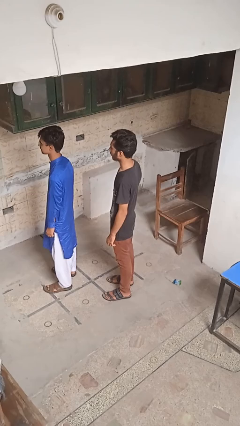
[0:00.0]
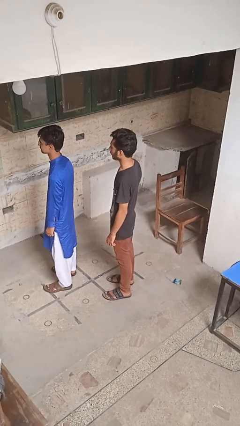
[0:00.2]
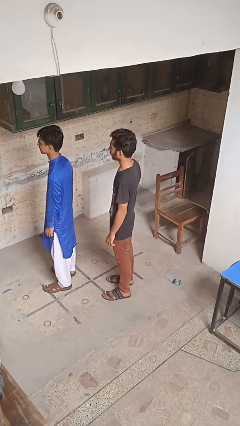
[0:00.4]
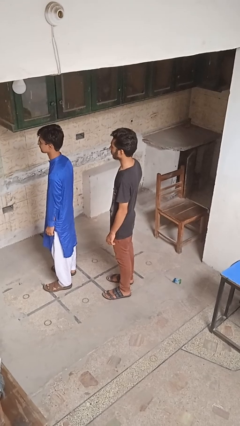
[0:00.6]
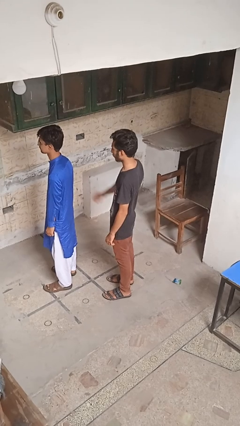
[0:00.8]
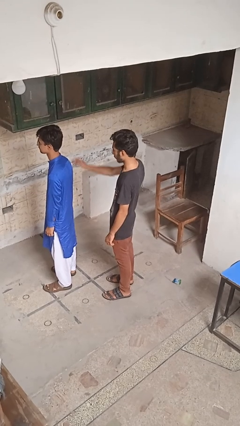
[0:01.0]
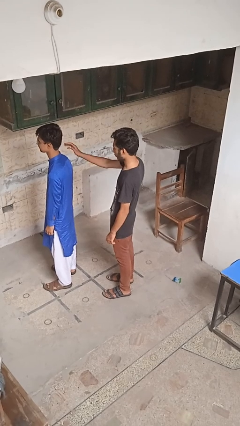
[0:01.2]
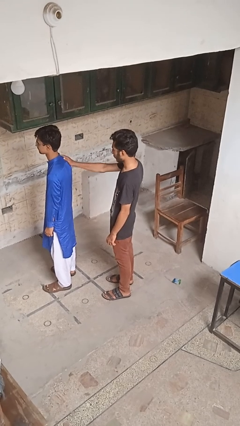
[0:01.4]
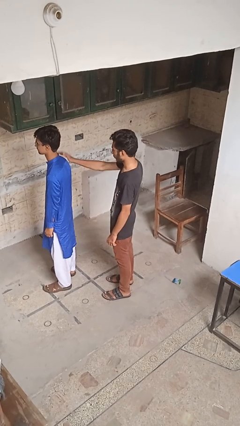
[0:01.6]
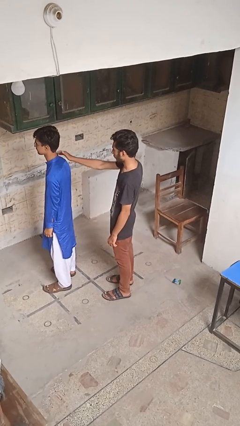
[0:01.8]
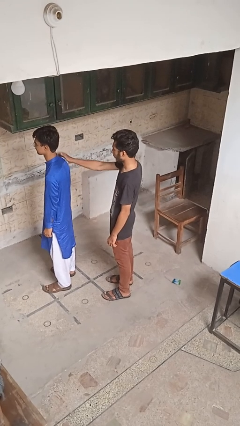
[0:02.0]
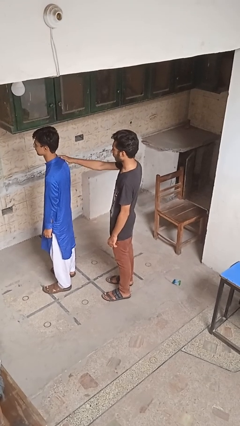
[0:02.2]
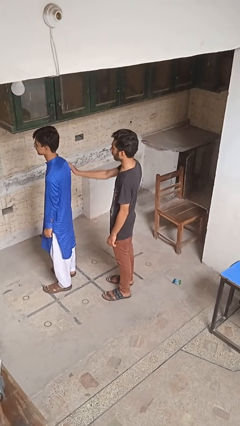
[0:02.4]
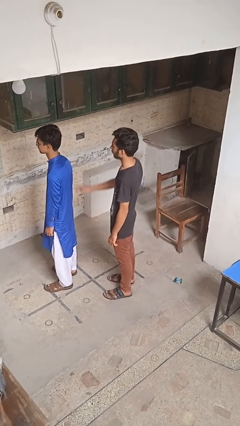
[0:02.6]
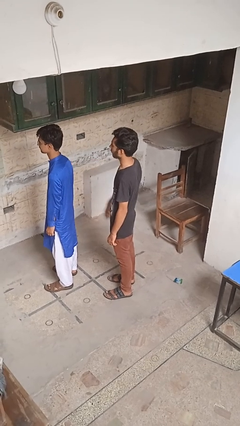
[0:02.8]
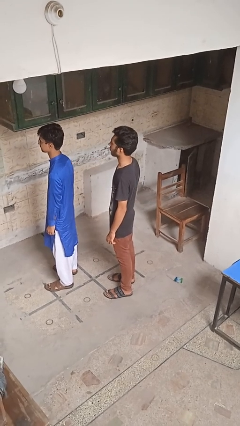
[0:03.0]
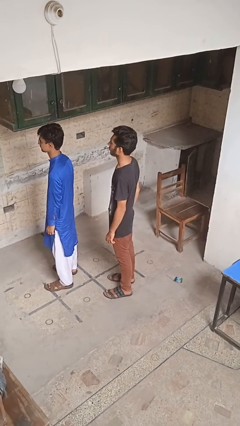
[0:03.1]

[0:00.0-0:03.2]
person touches back of person

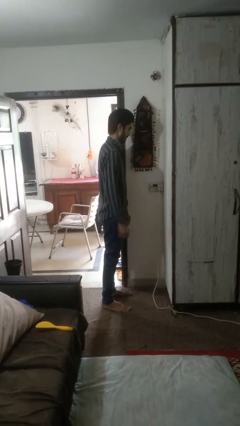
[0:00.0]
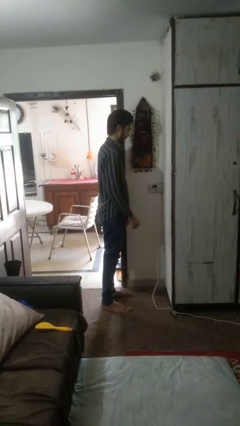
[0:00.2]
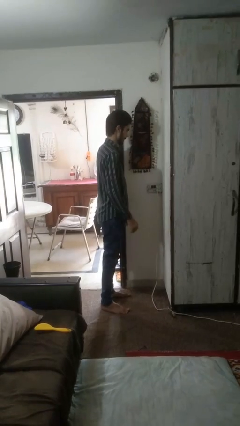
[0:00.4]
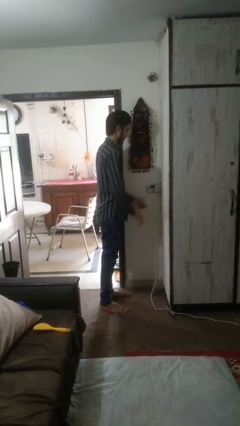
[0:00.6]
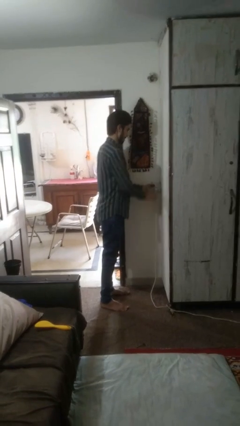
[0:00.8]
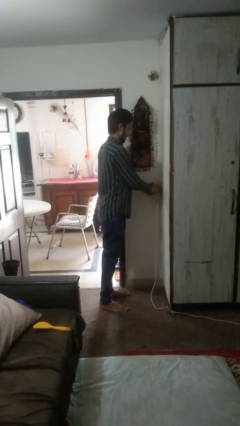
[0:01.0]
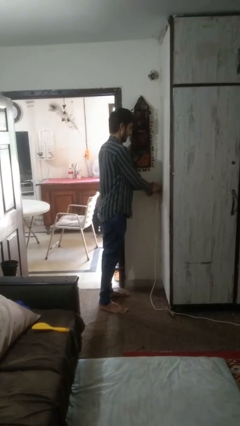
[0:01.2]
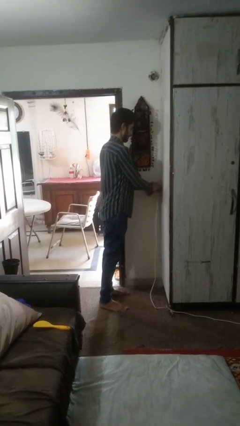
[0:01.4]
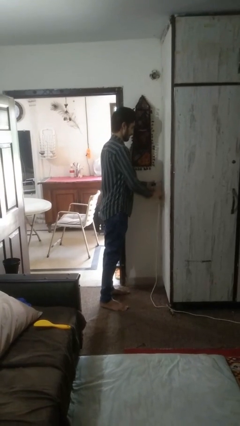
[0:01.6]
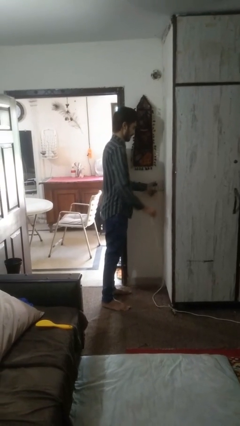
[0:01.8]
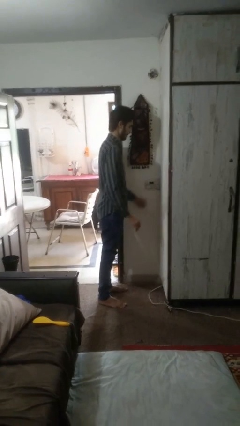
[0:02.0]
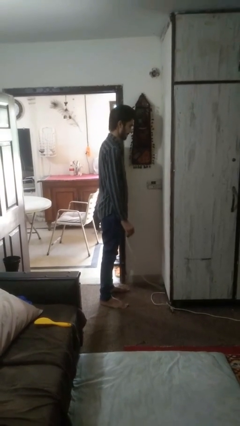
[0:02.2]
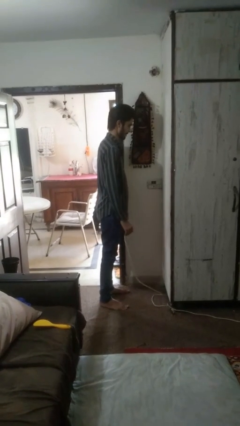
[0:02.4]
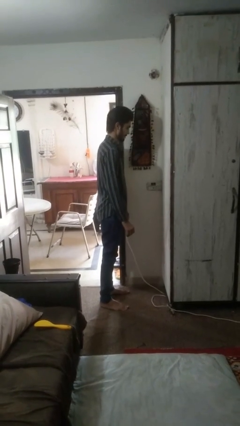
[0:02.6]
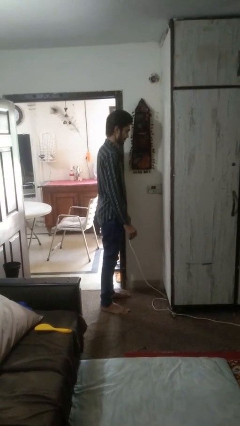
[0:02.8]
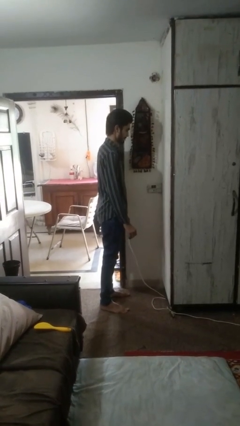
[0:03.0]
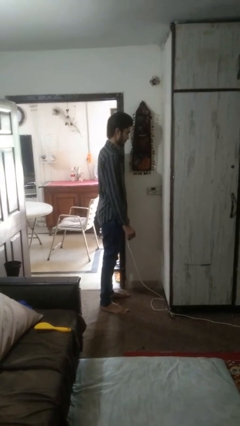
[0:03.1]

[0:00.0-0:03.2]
person unplugs from electrical socket

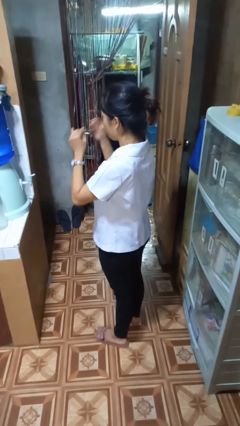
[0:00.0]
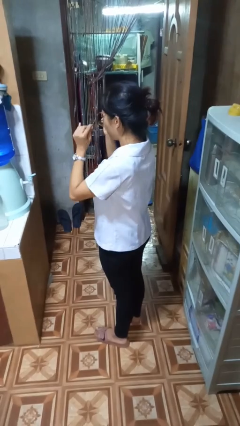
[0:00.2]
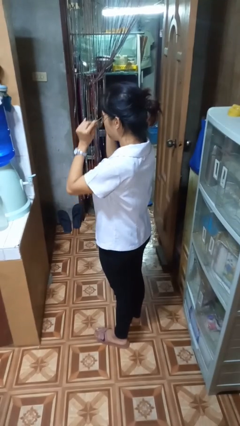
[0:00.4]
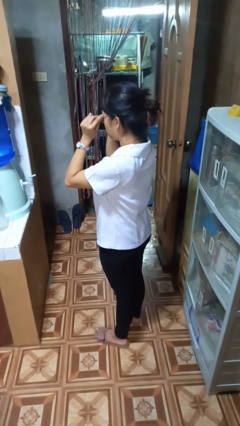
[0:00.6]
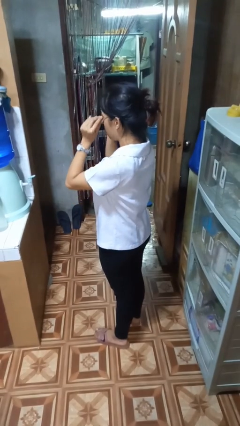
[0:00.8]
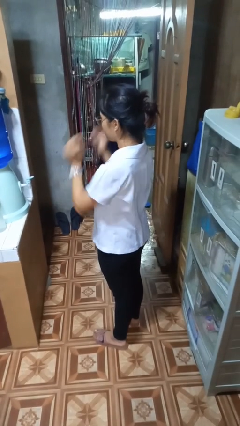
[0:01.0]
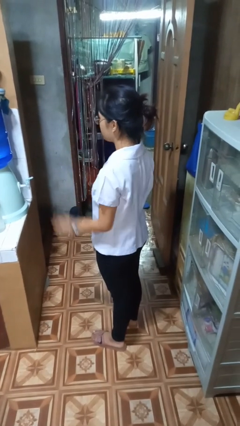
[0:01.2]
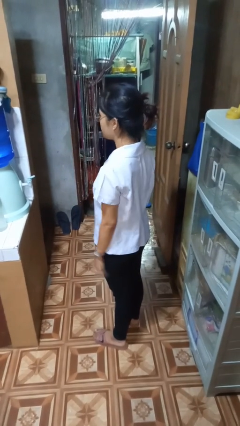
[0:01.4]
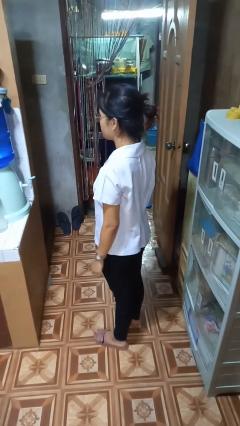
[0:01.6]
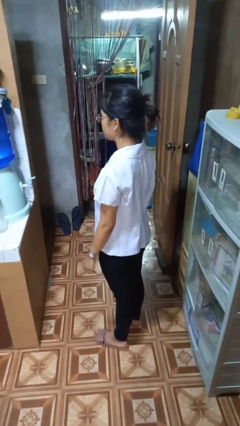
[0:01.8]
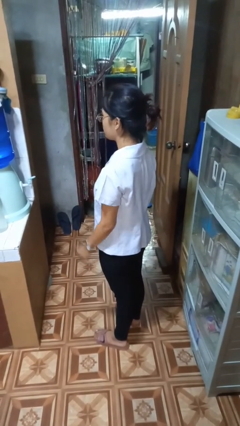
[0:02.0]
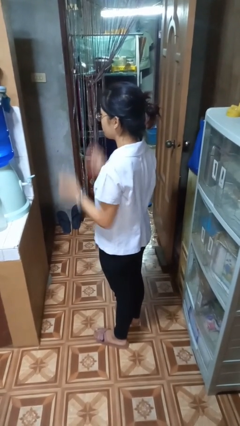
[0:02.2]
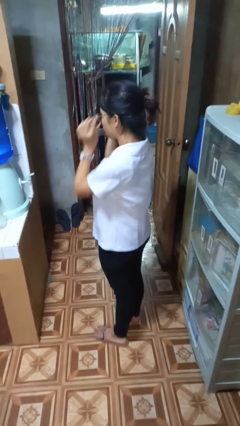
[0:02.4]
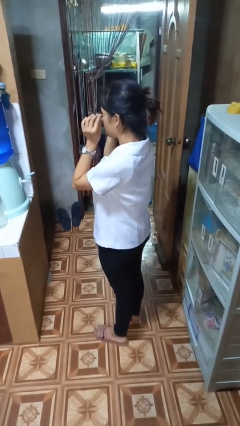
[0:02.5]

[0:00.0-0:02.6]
person puts on glasses

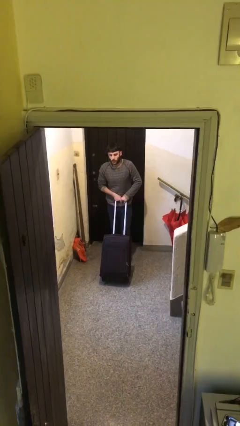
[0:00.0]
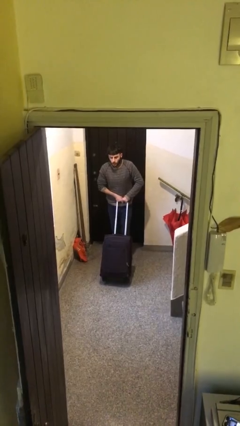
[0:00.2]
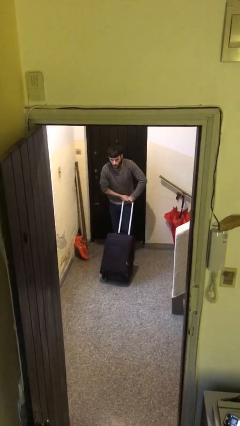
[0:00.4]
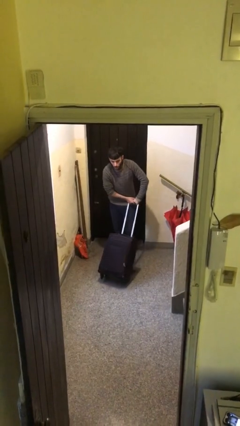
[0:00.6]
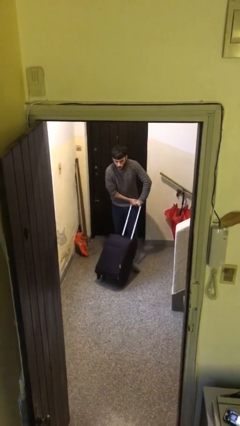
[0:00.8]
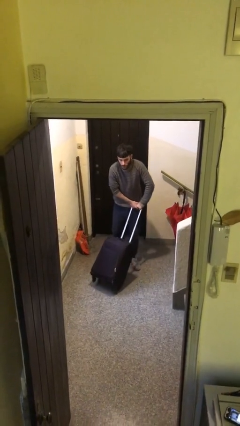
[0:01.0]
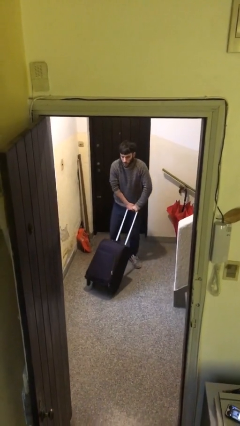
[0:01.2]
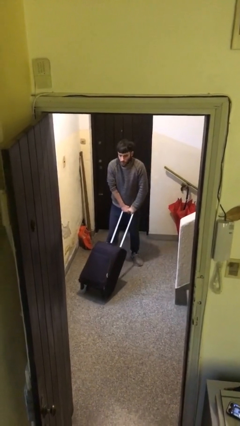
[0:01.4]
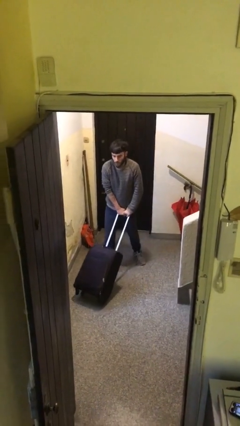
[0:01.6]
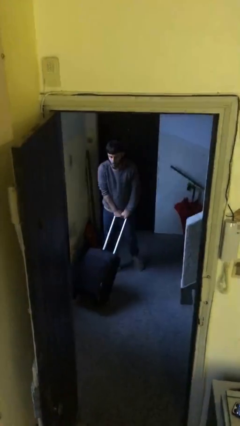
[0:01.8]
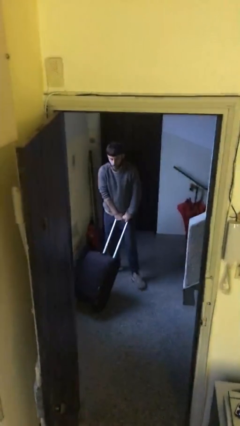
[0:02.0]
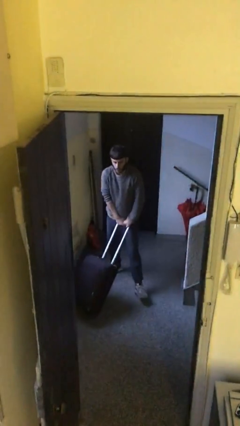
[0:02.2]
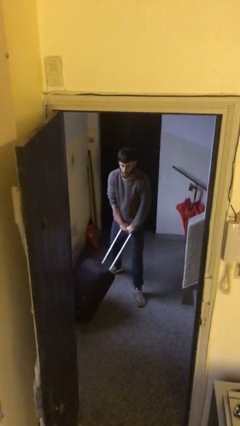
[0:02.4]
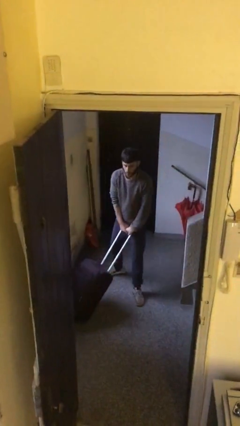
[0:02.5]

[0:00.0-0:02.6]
person pushes wheeled cart

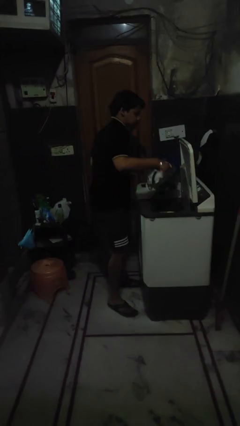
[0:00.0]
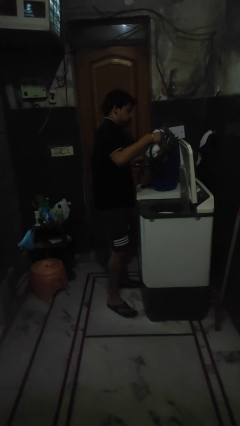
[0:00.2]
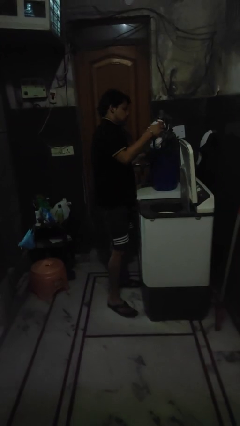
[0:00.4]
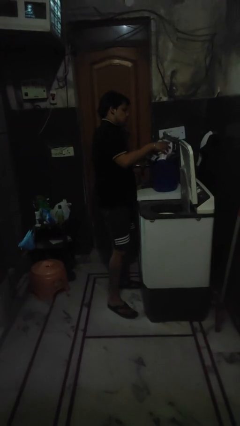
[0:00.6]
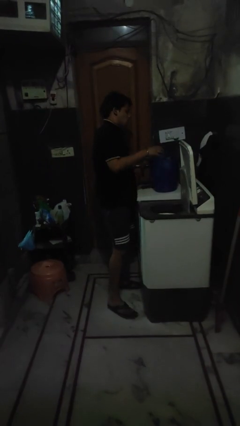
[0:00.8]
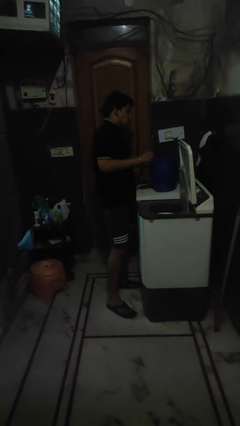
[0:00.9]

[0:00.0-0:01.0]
person unloads clotheswasher

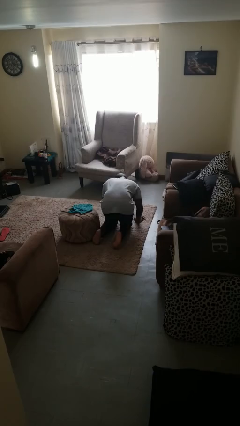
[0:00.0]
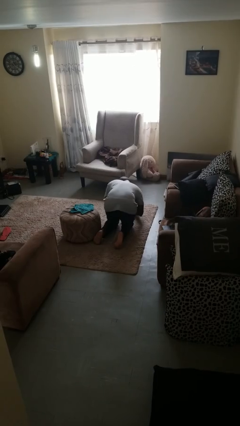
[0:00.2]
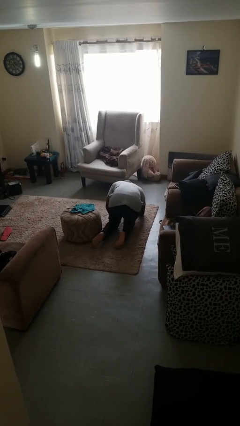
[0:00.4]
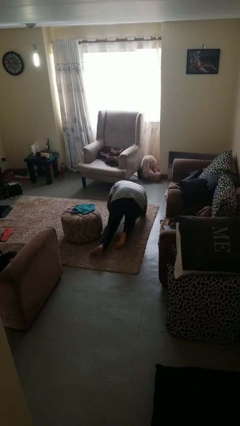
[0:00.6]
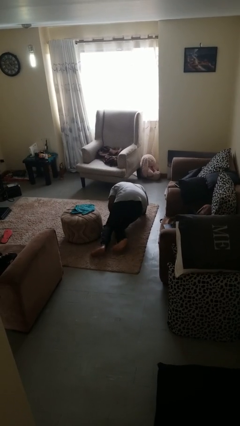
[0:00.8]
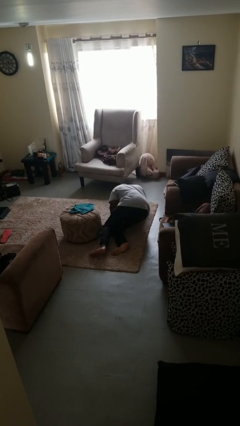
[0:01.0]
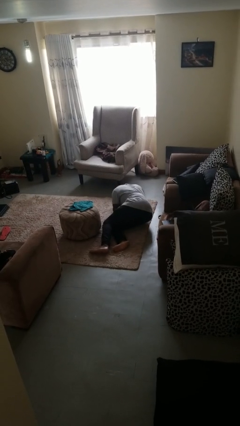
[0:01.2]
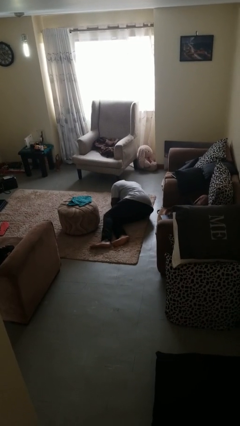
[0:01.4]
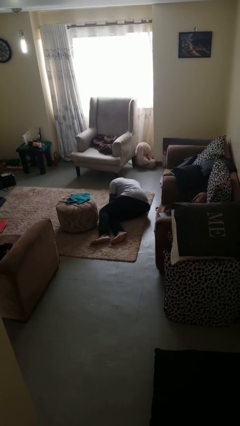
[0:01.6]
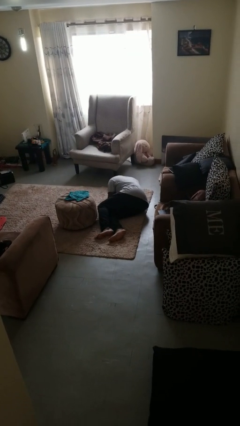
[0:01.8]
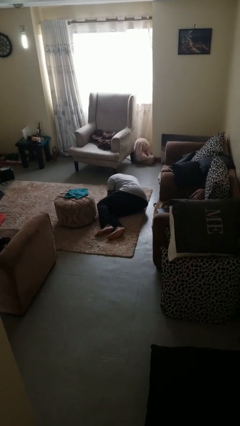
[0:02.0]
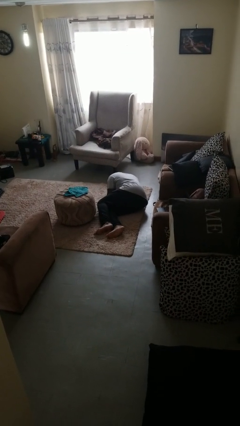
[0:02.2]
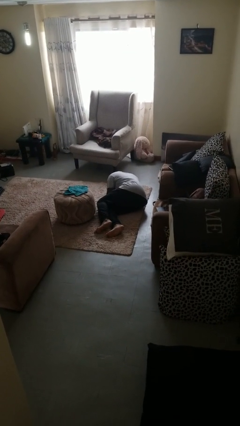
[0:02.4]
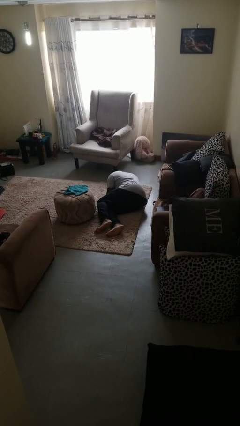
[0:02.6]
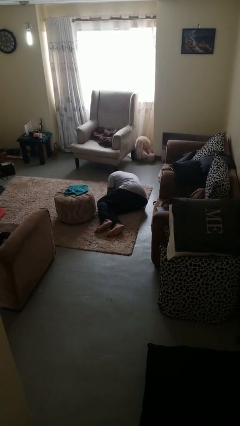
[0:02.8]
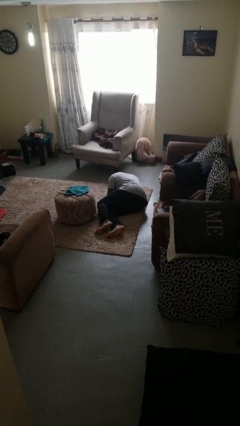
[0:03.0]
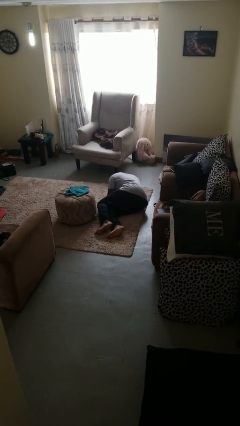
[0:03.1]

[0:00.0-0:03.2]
person lies down on floor

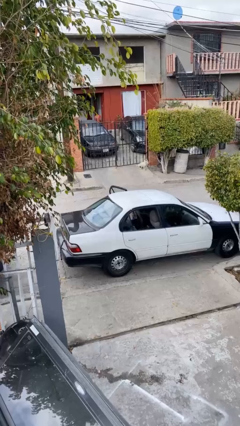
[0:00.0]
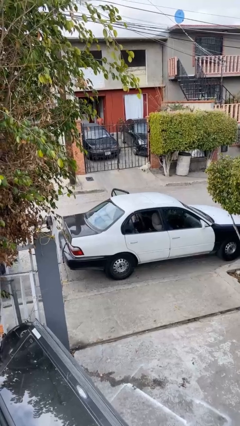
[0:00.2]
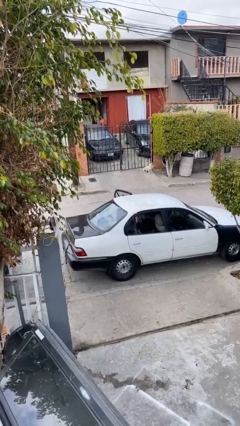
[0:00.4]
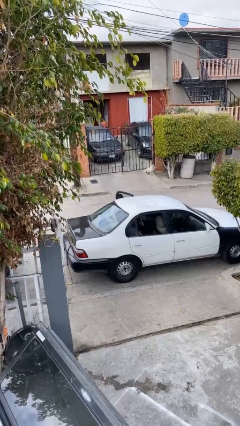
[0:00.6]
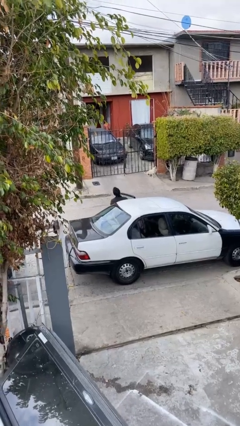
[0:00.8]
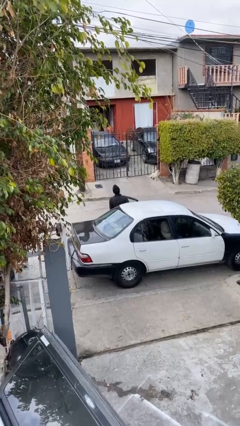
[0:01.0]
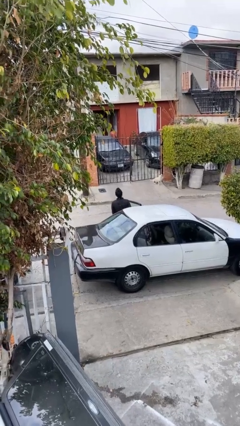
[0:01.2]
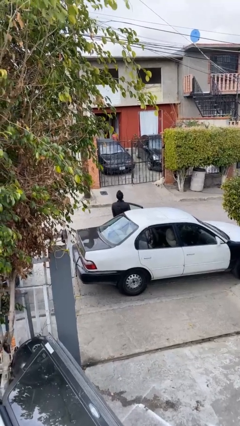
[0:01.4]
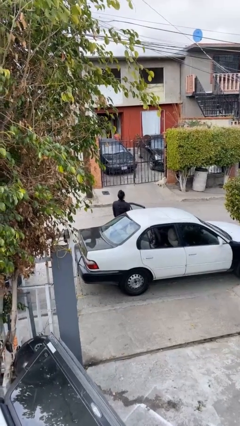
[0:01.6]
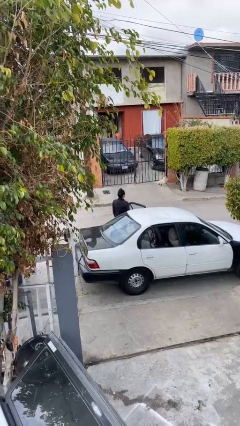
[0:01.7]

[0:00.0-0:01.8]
person exits car
